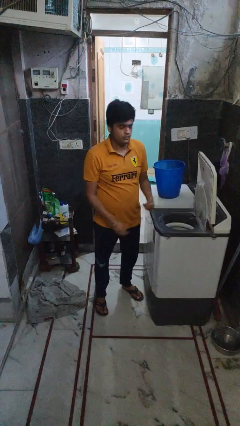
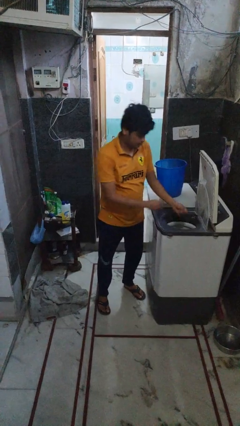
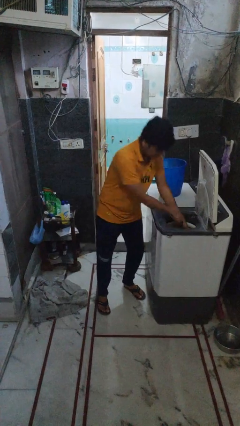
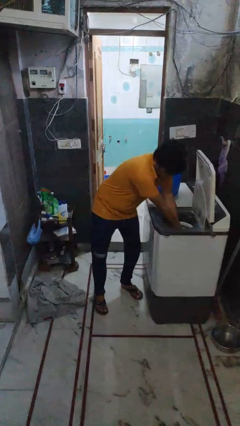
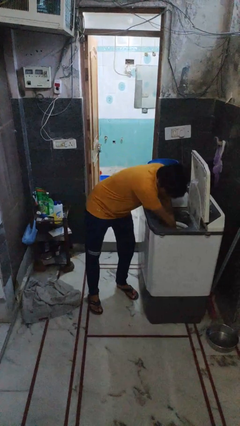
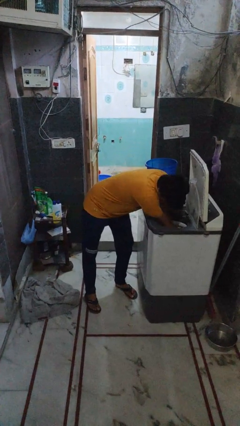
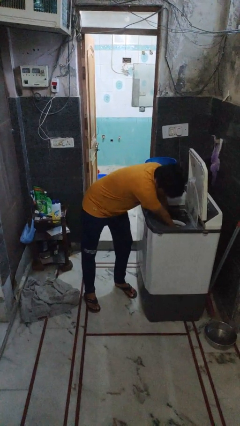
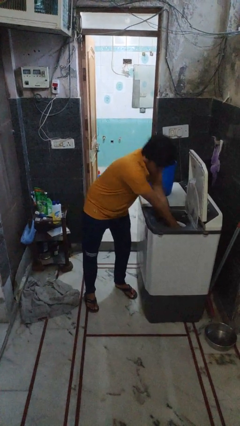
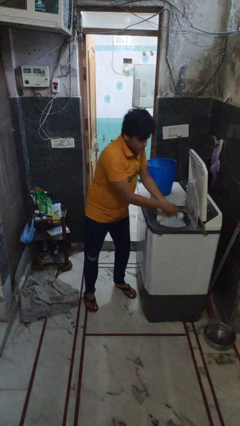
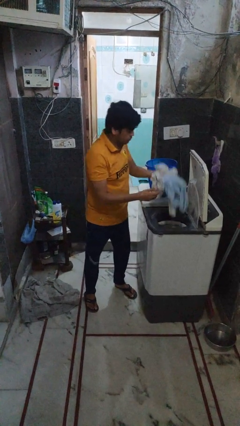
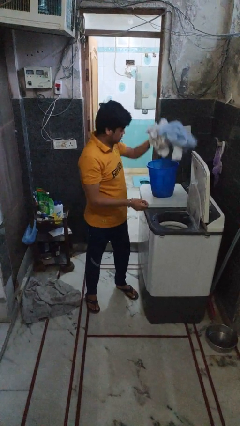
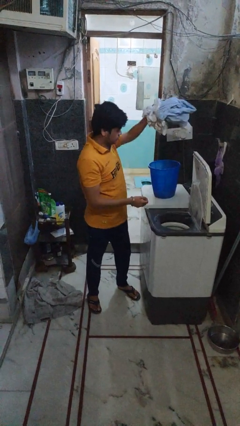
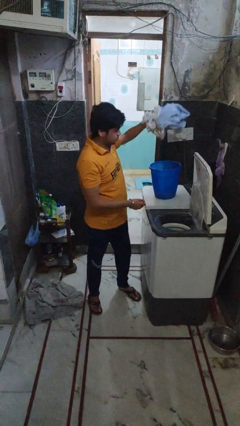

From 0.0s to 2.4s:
person unloads clotheswasher

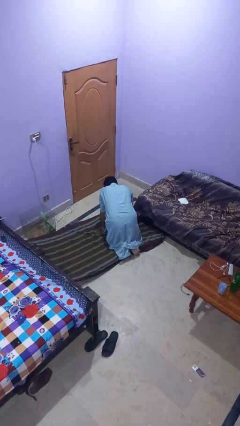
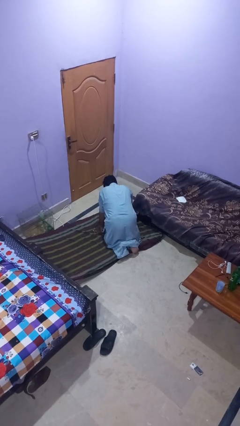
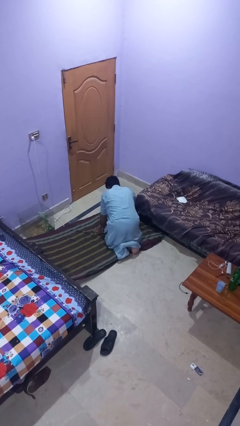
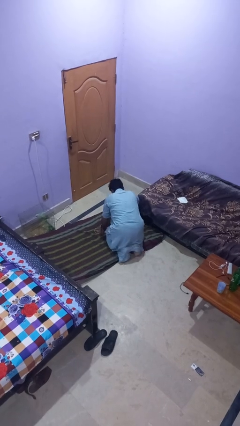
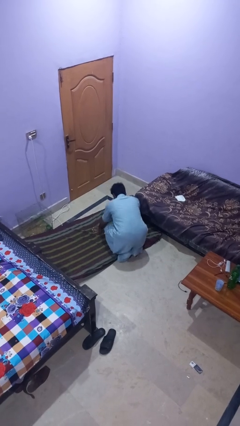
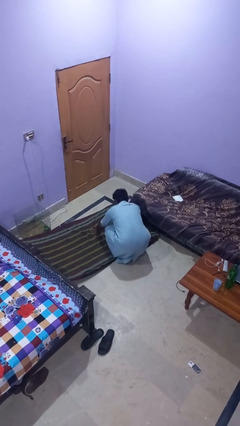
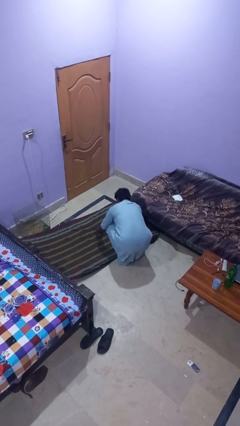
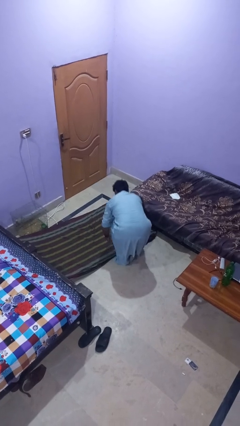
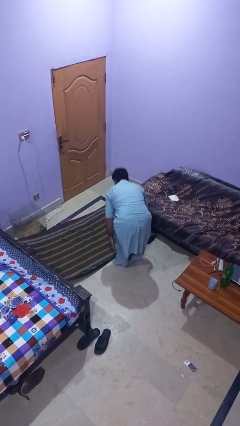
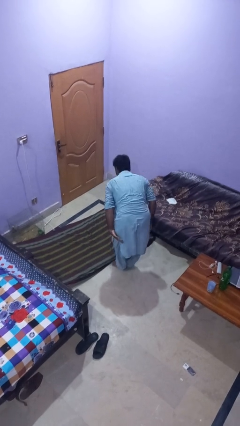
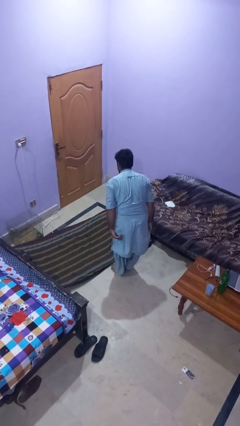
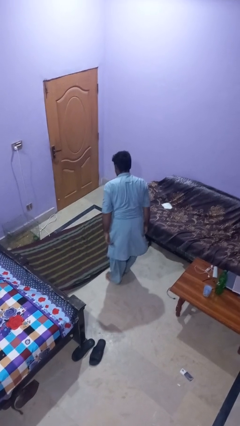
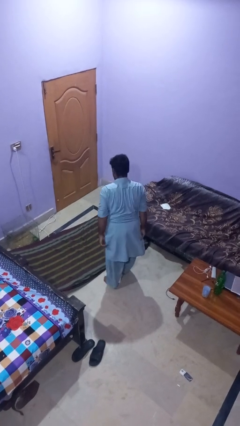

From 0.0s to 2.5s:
person stands up from floor

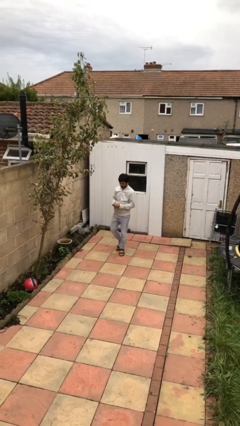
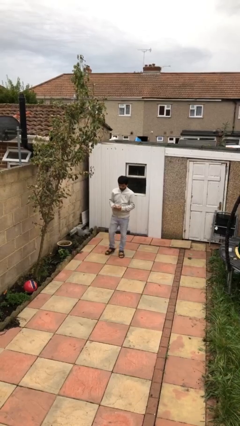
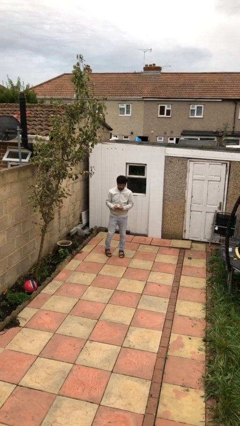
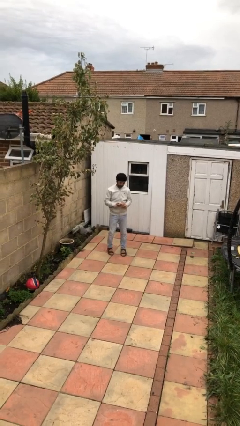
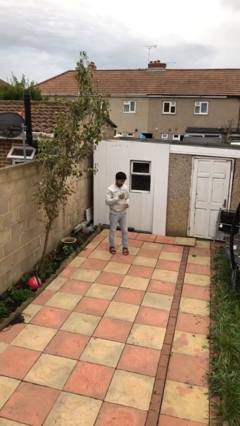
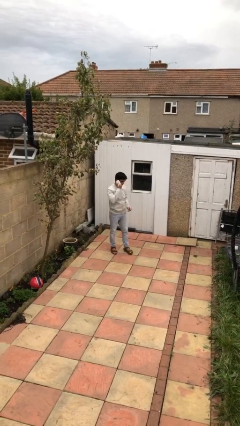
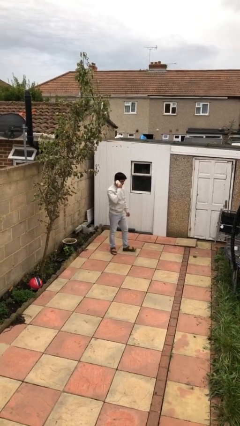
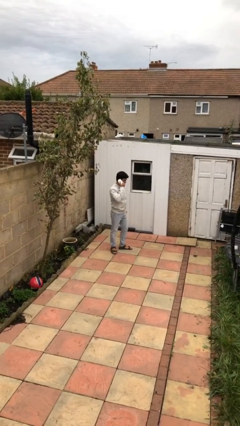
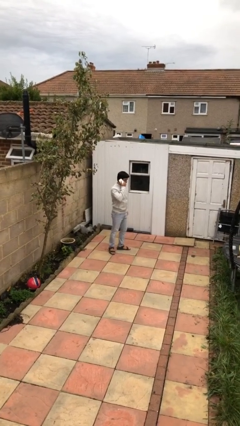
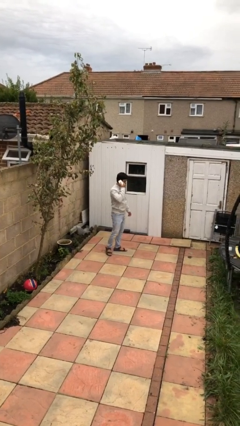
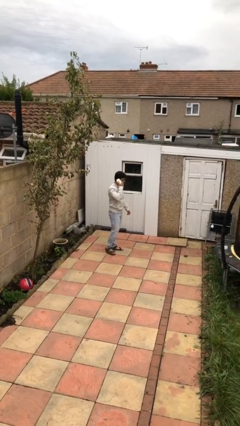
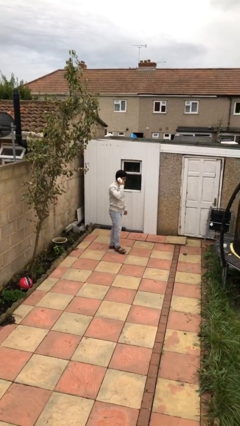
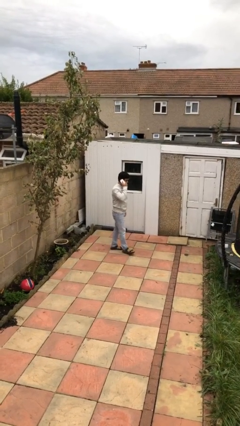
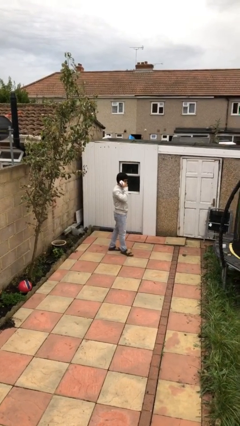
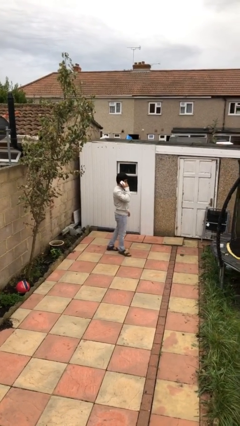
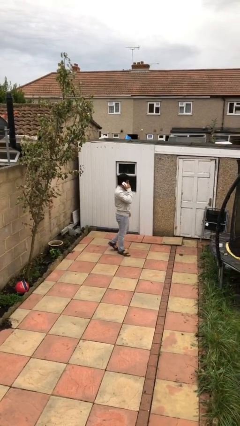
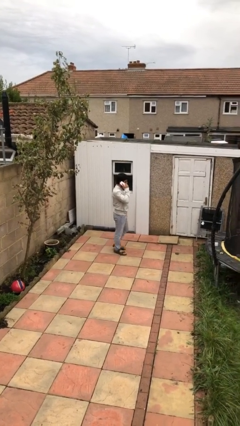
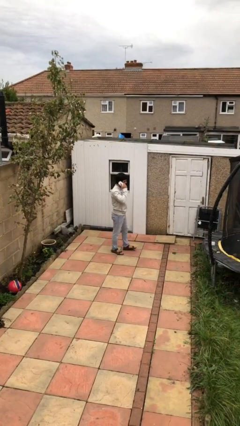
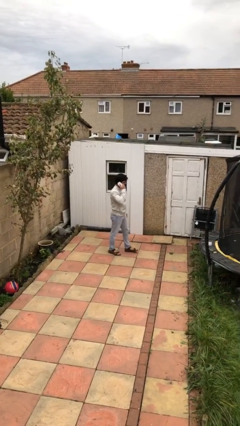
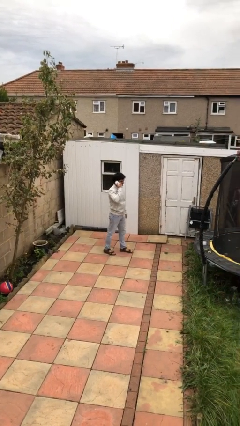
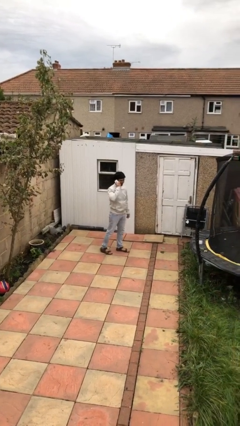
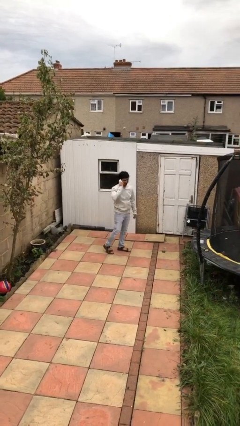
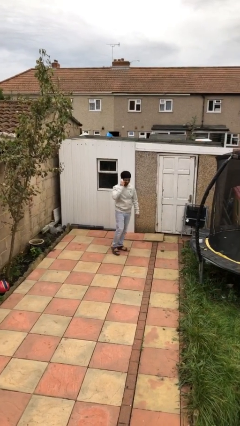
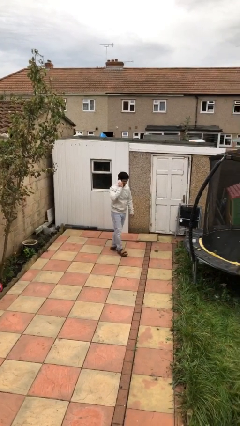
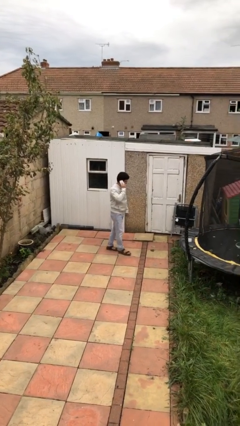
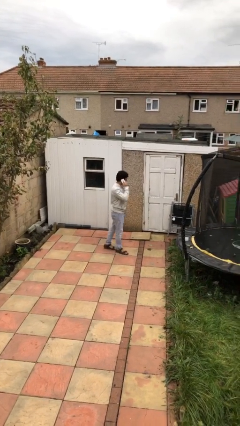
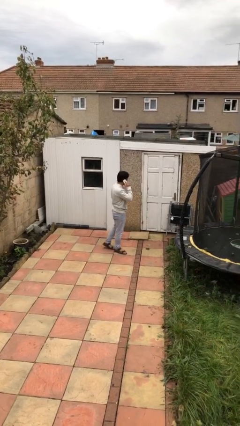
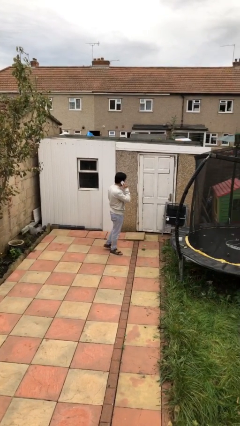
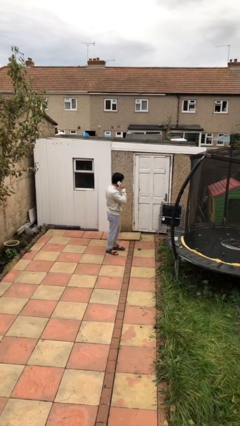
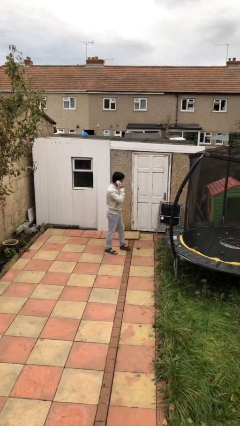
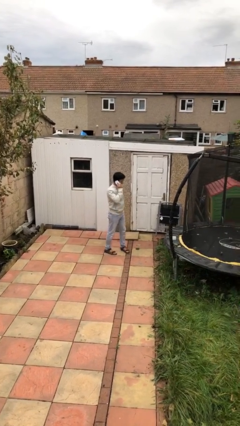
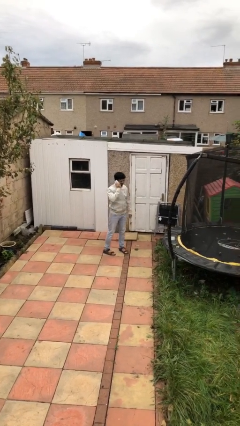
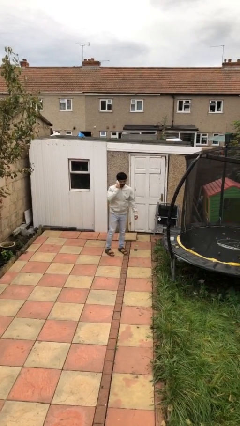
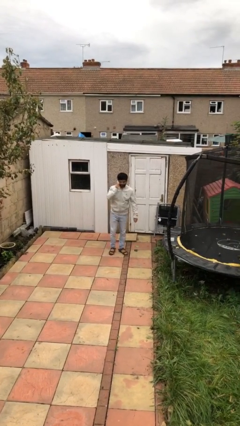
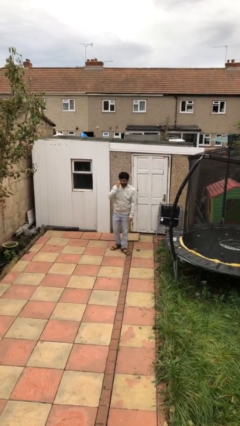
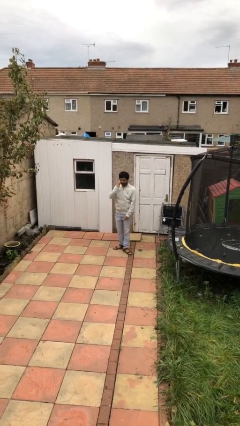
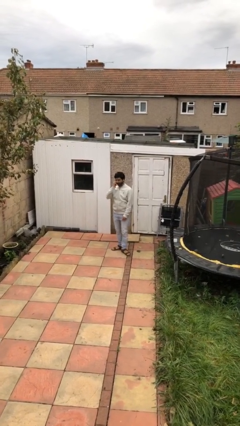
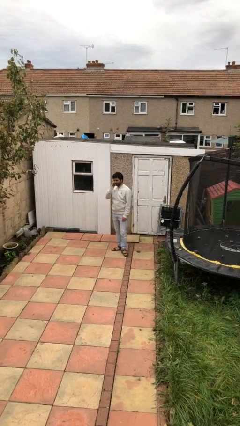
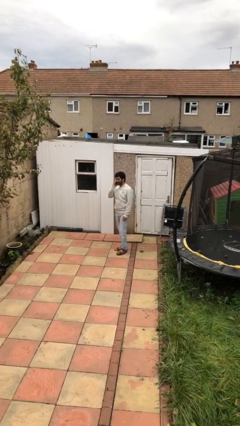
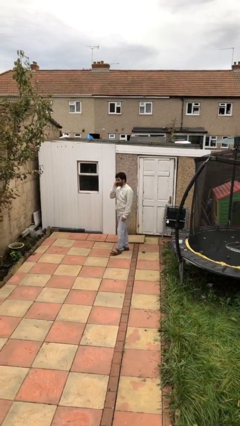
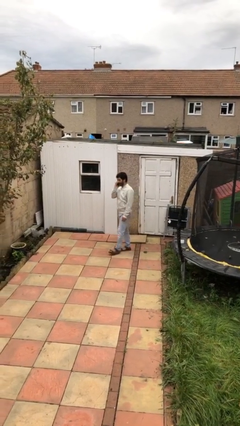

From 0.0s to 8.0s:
person talks on phone

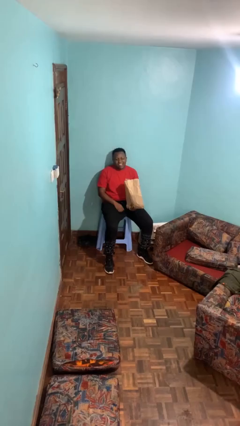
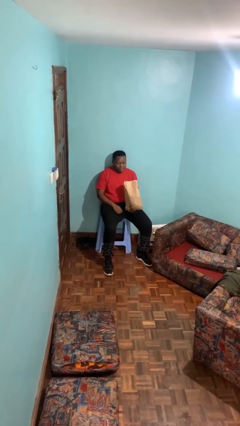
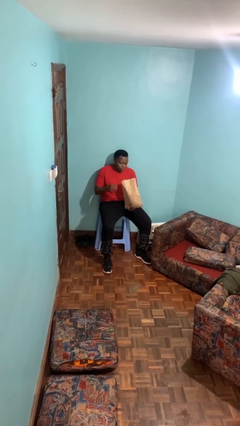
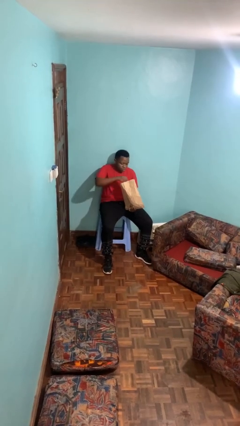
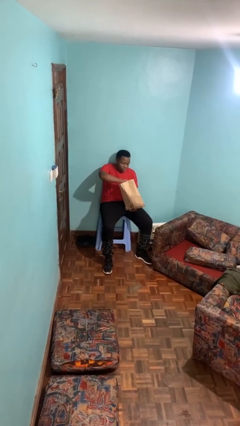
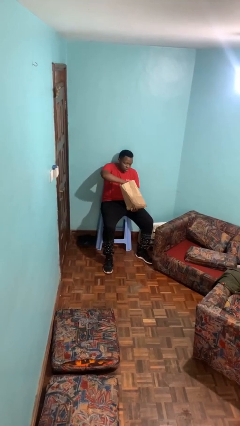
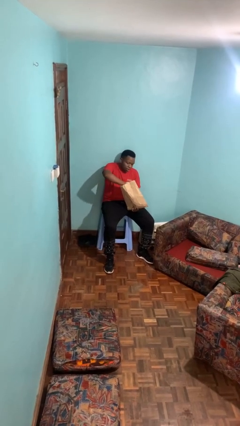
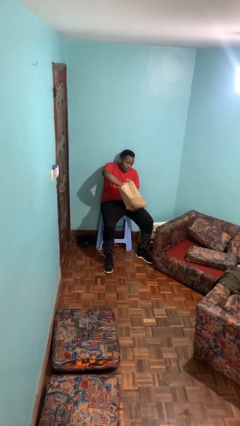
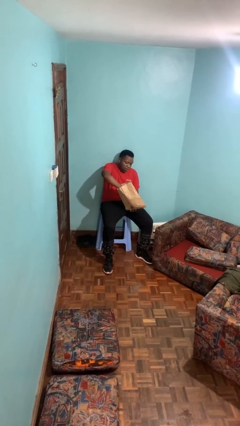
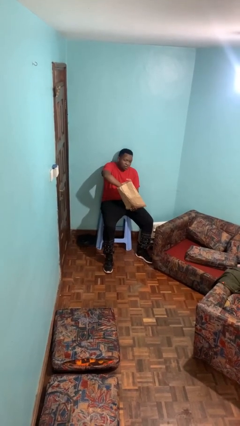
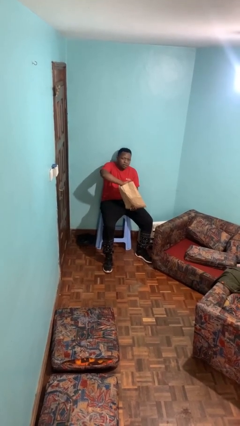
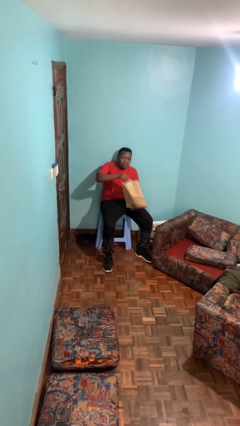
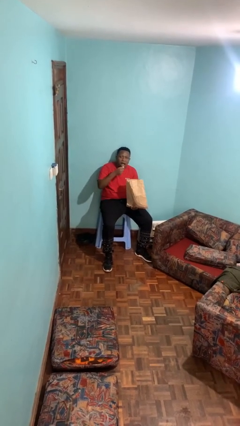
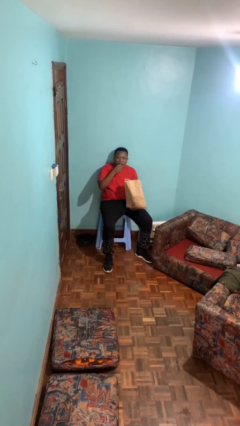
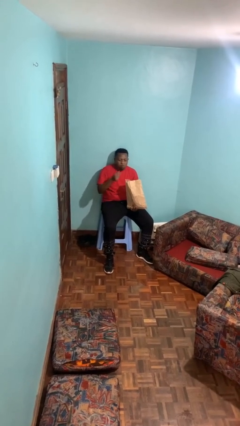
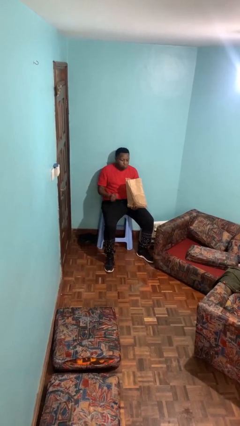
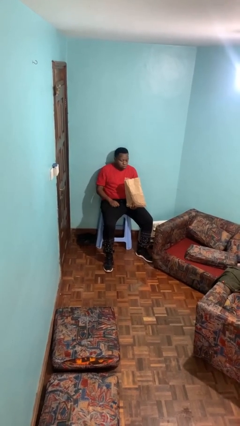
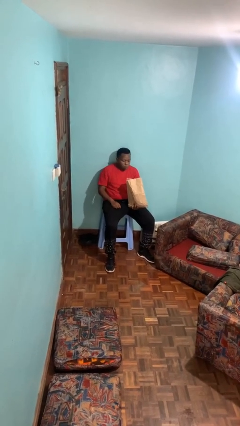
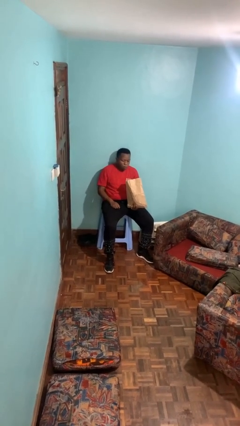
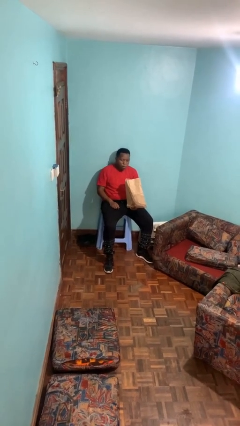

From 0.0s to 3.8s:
person eats snack from bag

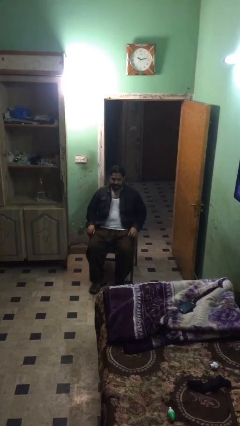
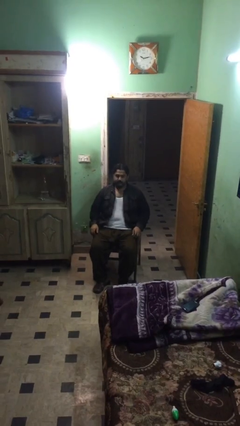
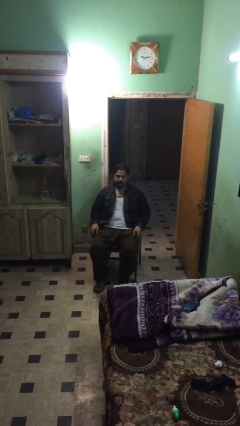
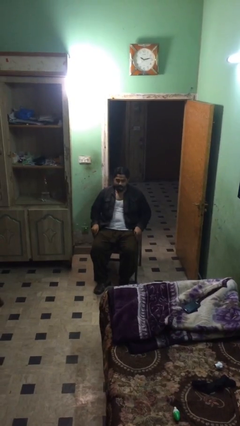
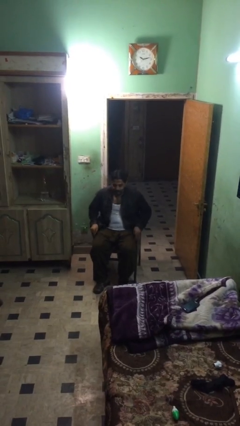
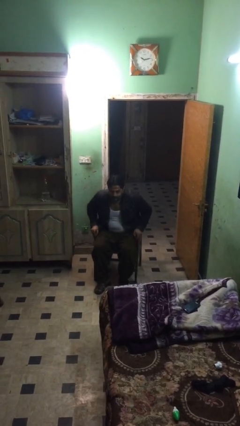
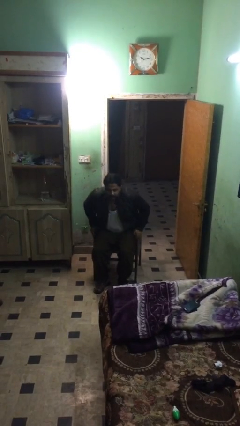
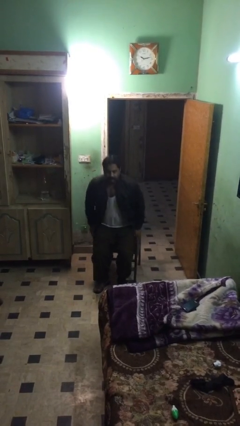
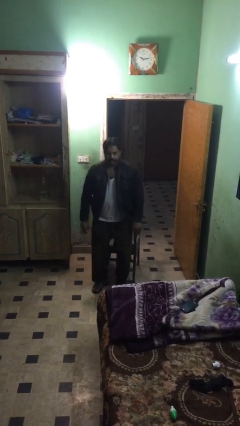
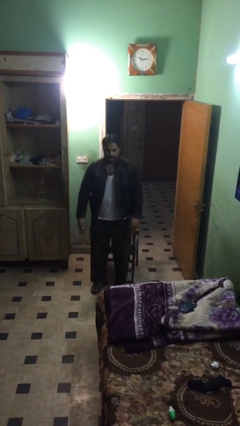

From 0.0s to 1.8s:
person stands up
